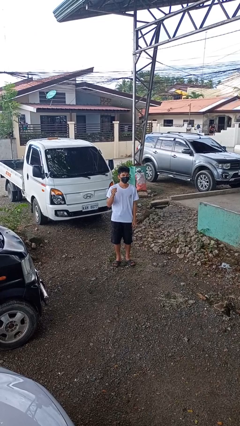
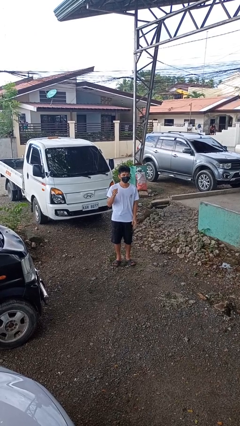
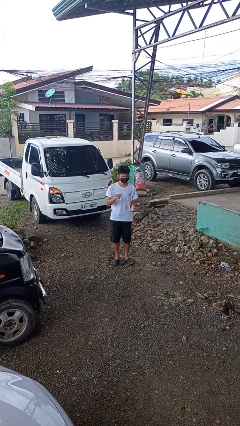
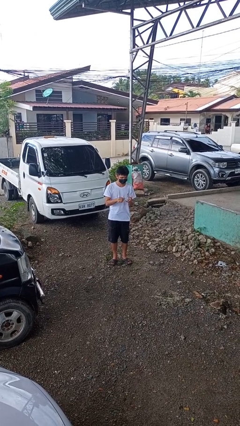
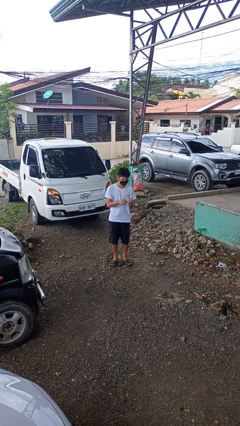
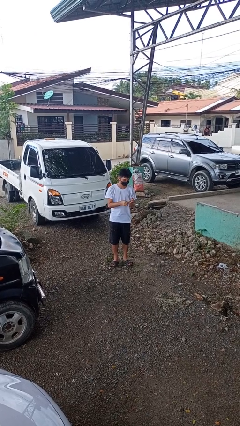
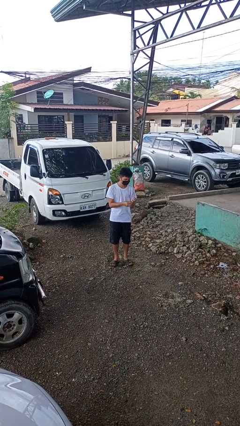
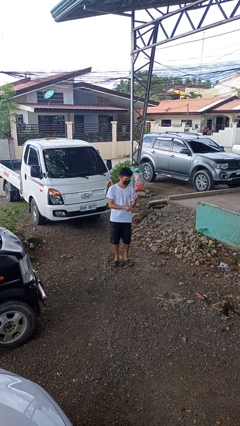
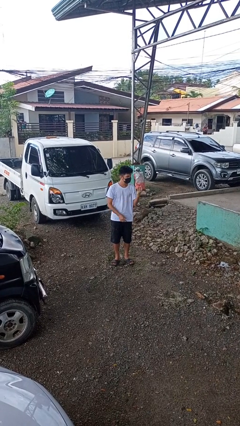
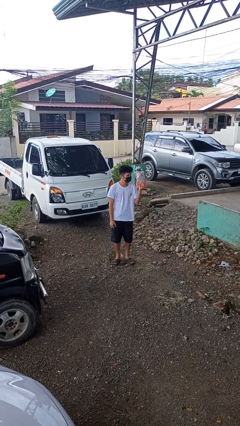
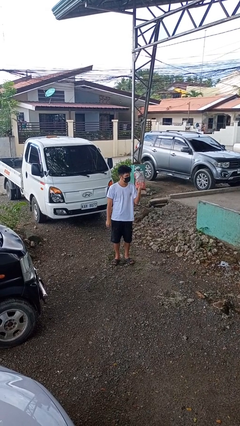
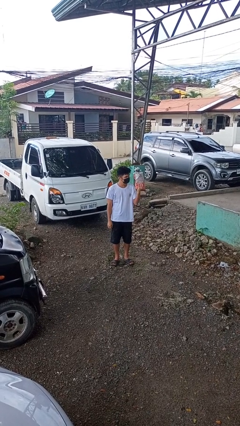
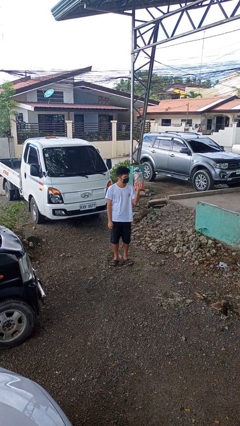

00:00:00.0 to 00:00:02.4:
person puts on ring

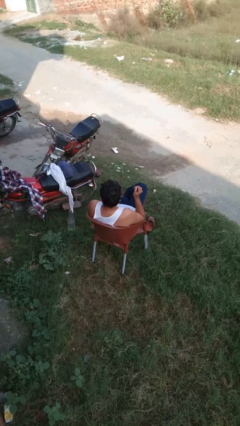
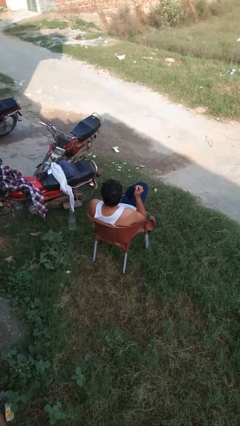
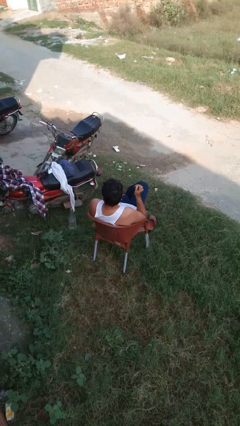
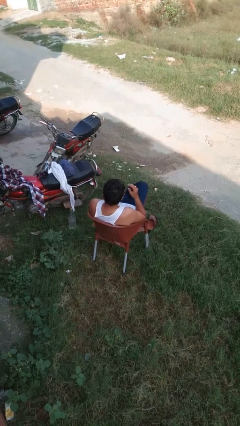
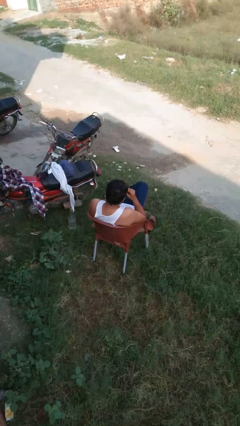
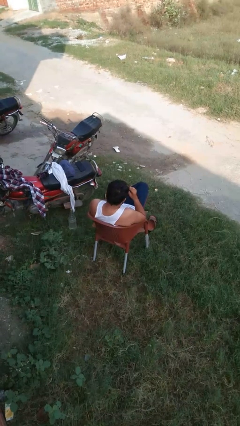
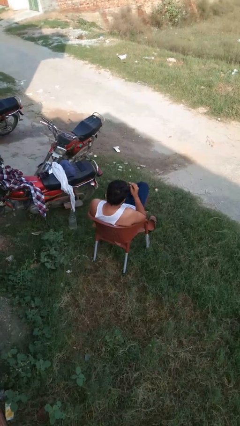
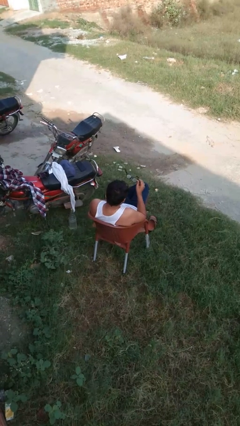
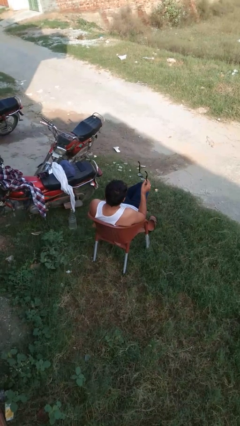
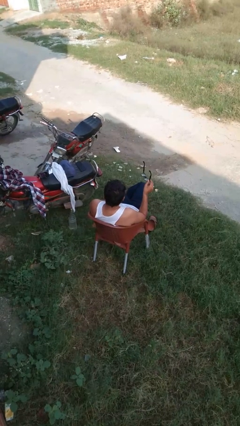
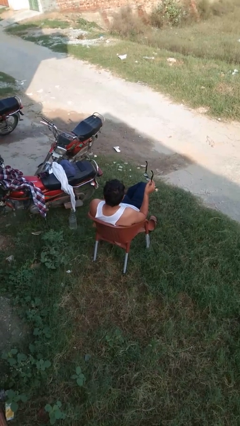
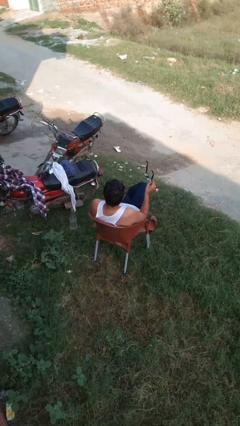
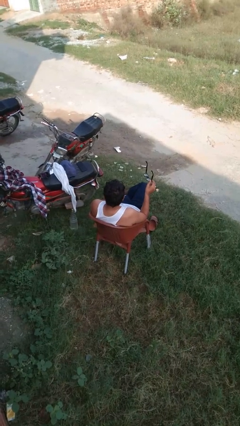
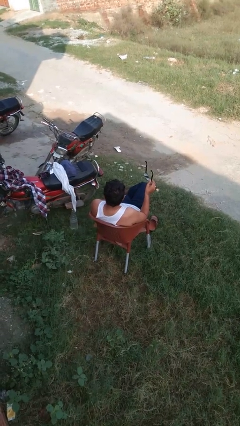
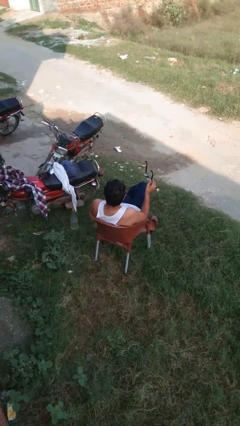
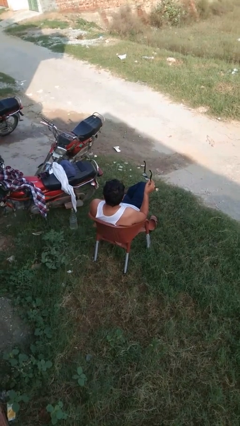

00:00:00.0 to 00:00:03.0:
person takes off glasses

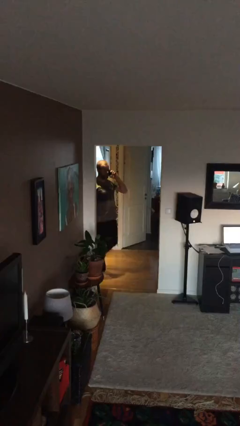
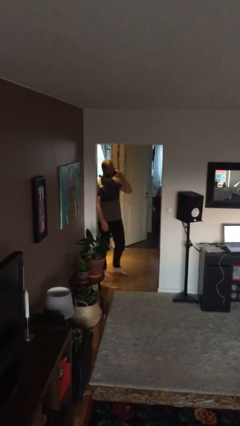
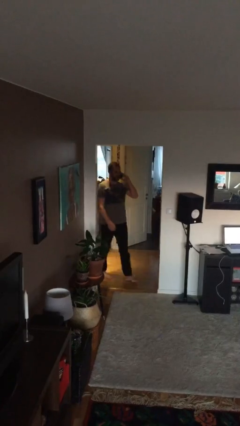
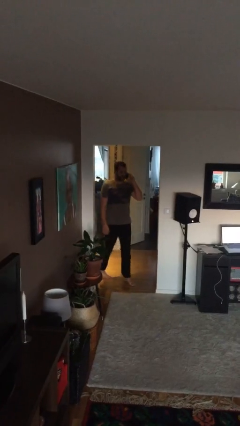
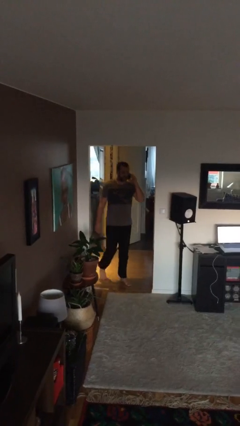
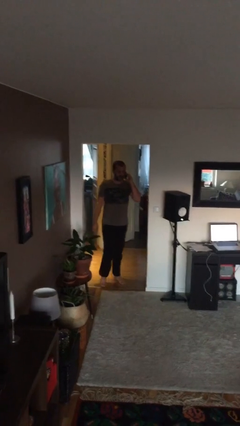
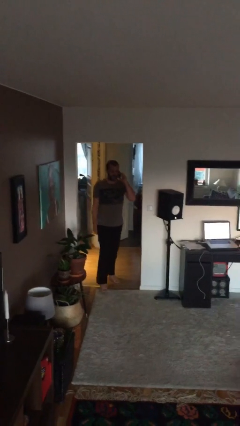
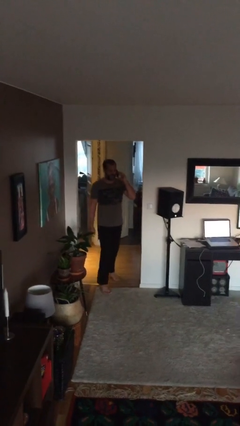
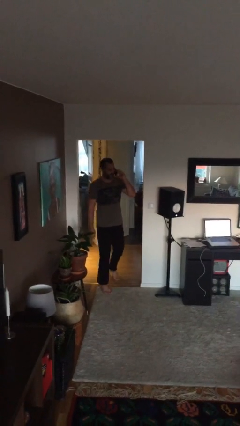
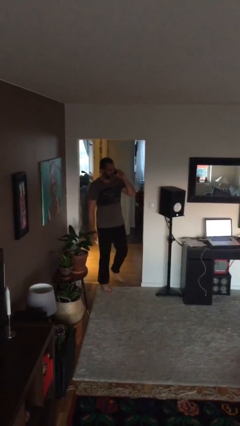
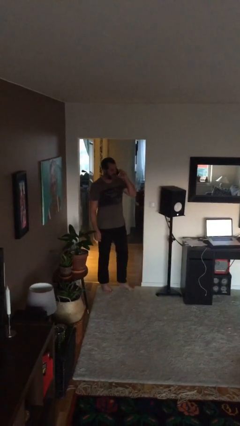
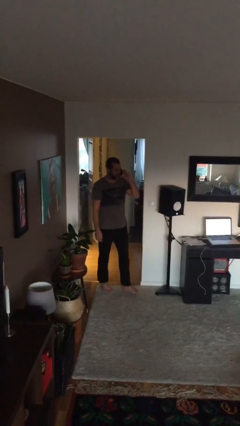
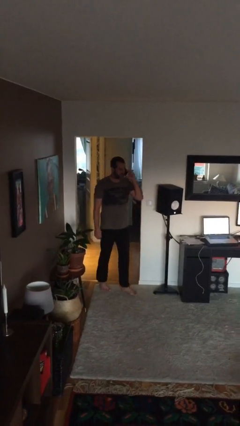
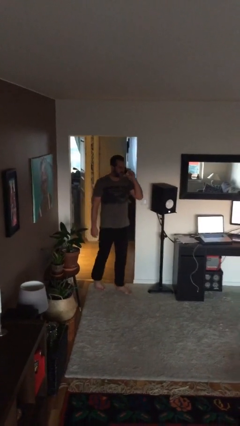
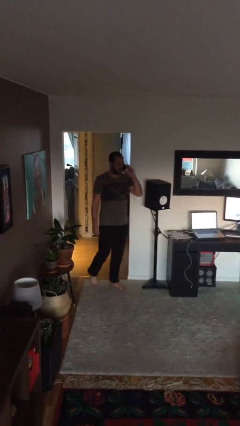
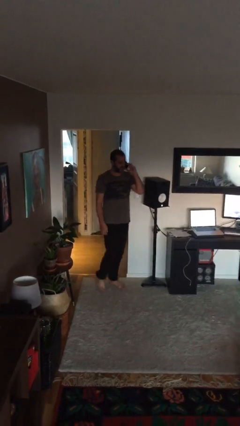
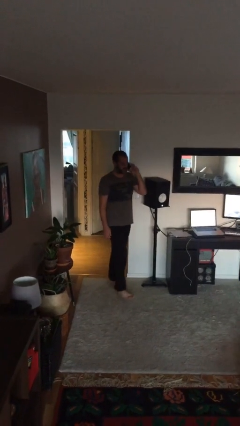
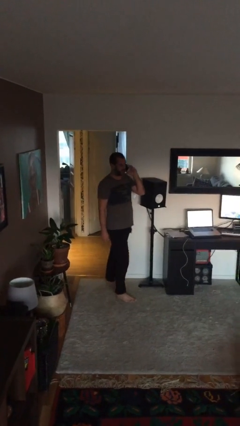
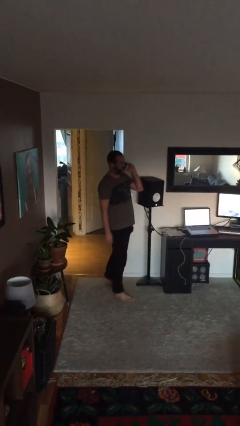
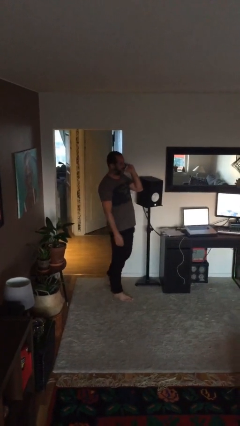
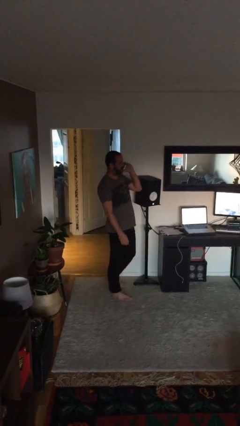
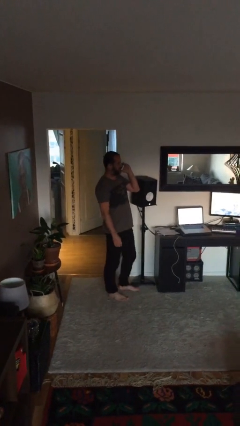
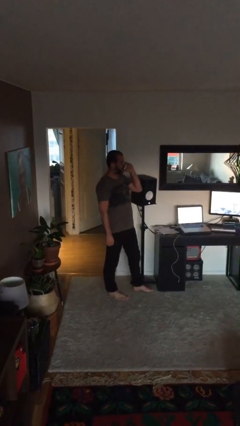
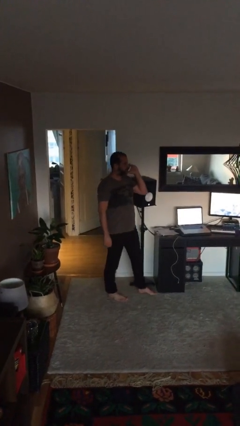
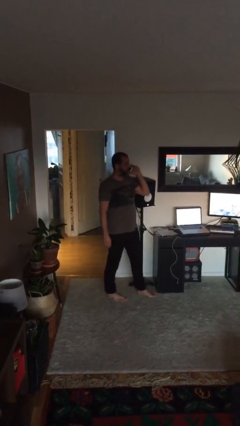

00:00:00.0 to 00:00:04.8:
person enters scene through structure

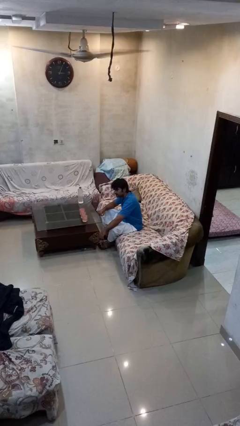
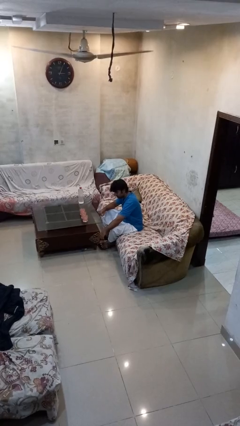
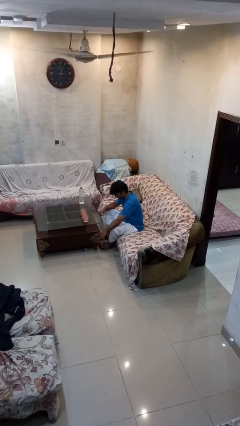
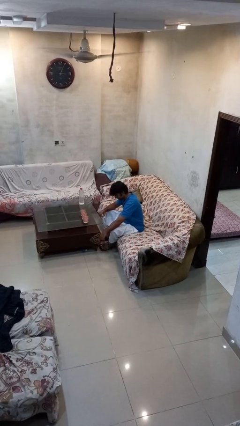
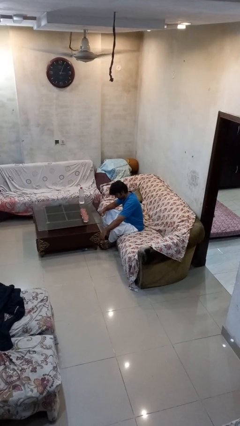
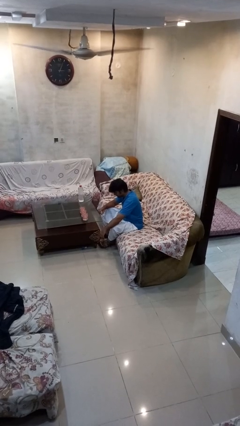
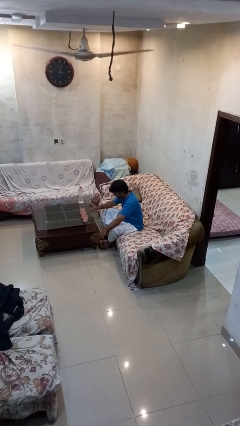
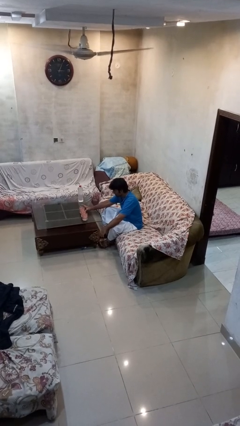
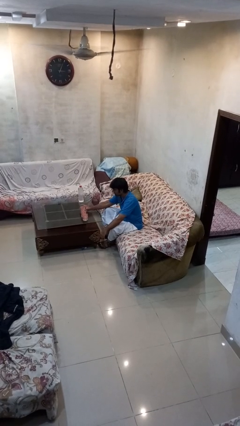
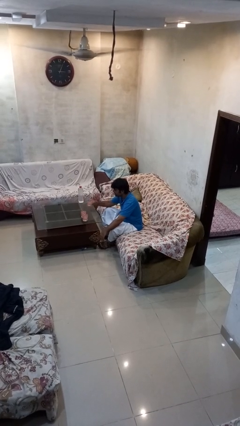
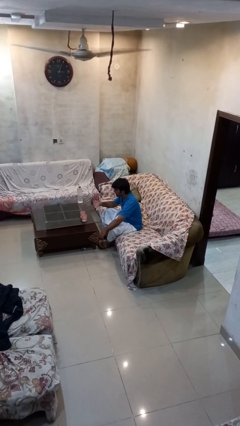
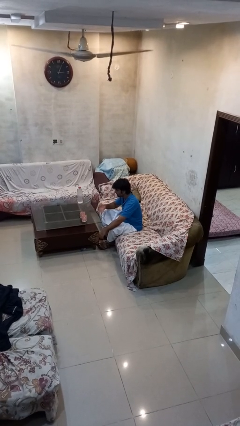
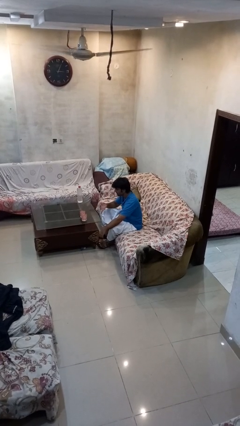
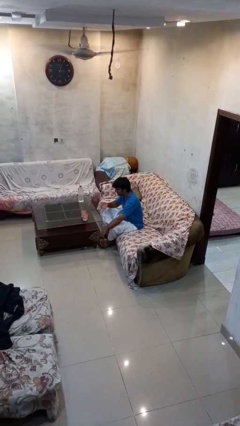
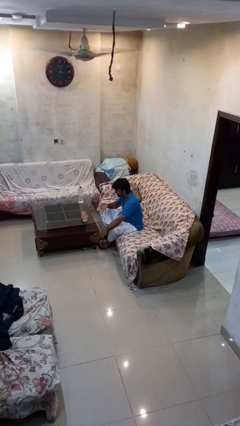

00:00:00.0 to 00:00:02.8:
person picks up object from table

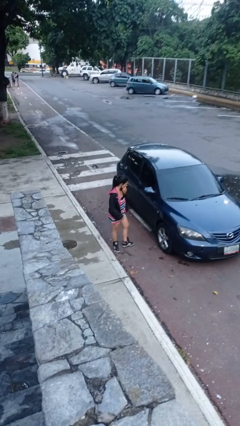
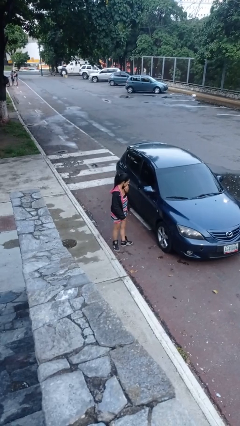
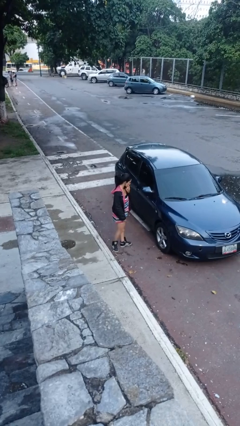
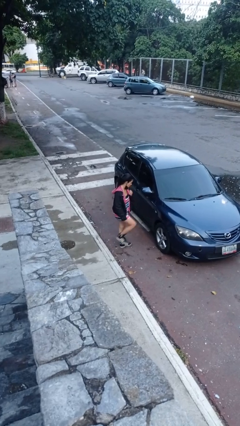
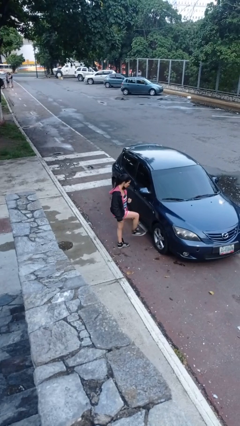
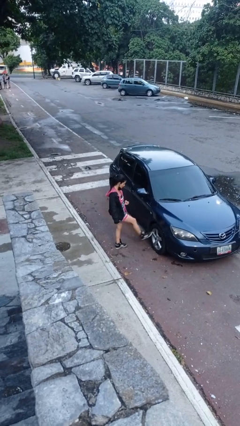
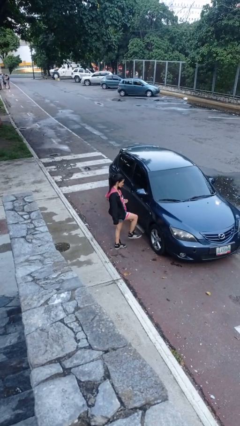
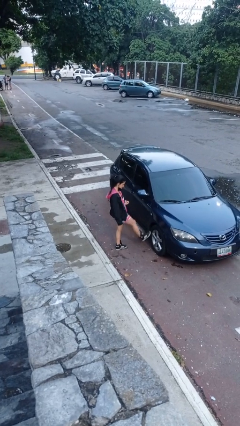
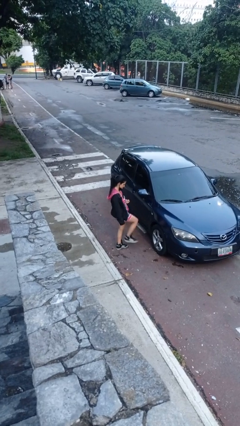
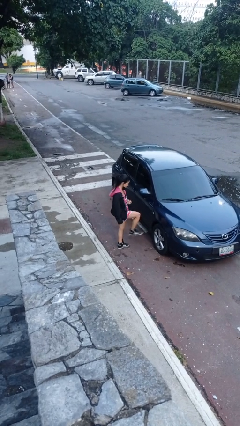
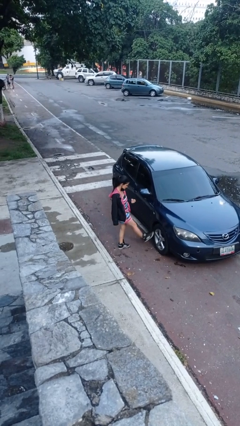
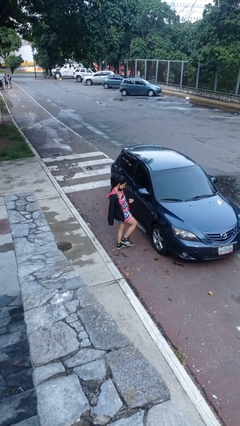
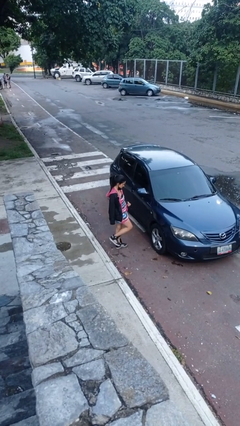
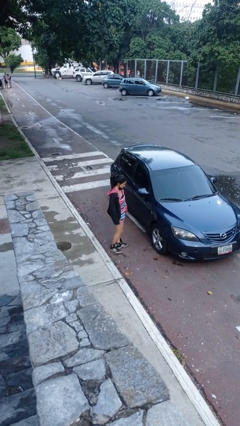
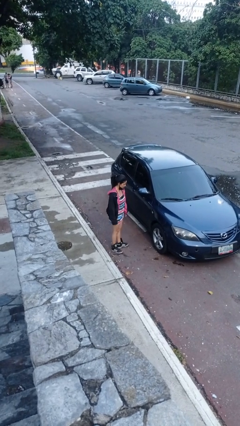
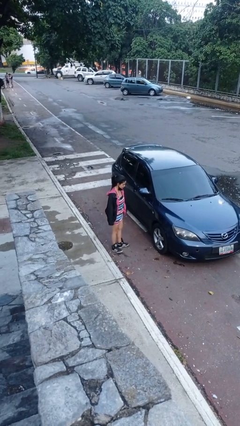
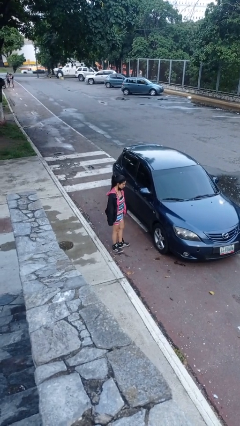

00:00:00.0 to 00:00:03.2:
person kicks car tires

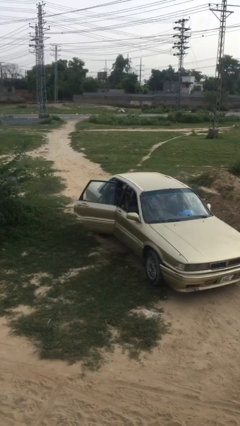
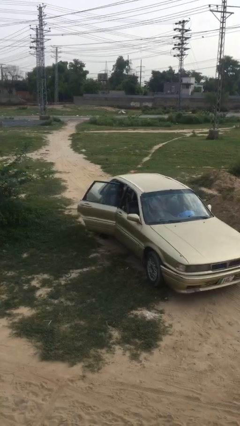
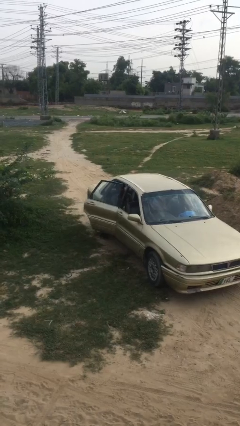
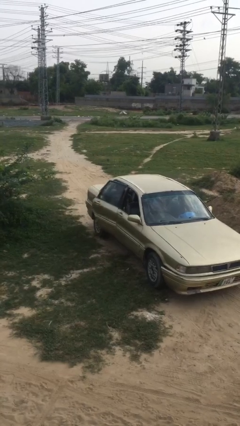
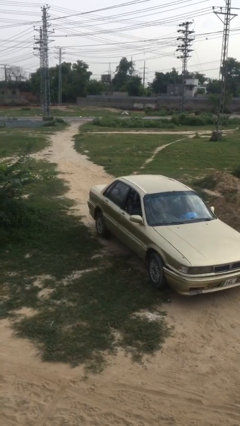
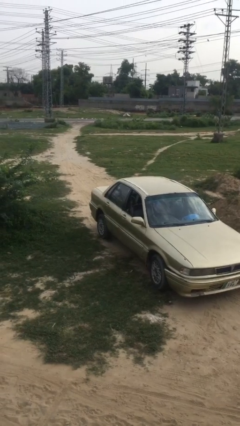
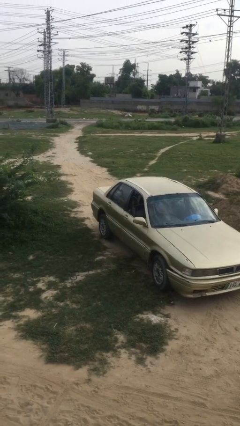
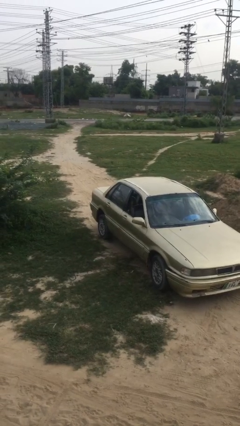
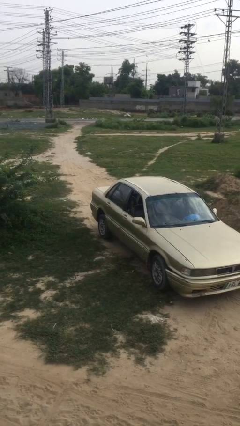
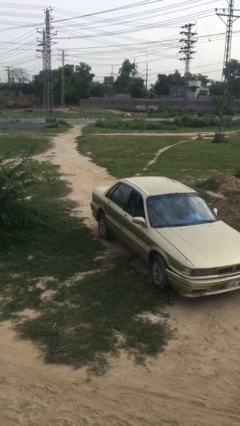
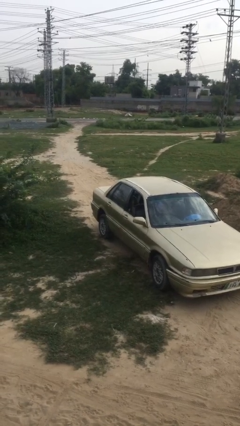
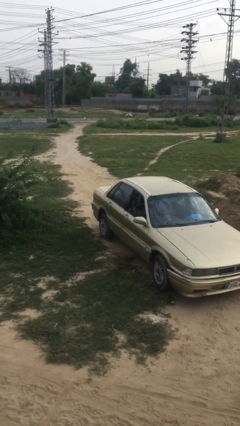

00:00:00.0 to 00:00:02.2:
person closes car door
